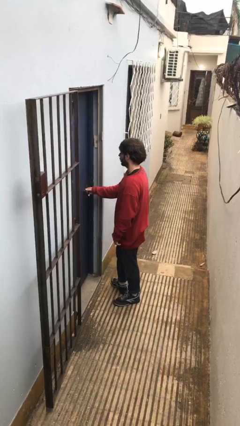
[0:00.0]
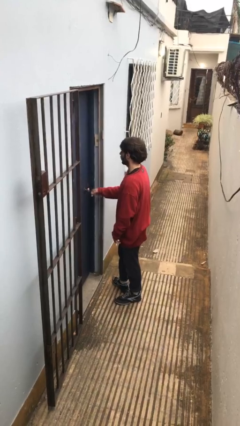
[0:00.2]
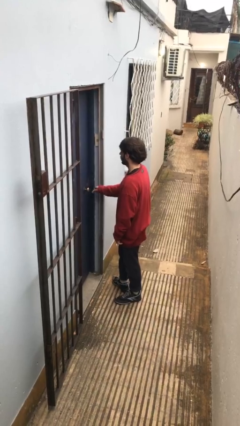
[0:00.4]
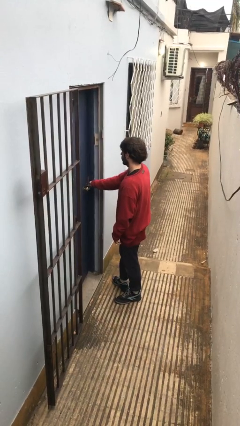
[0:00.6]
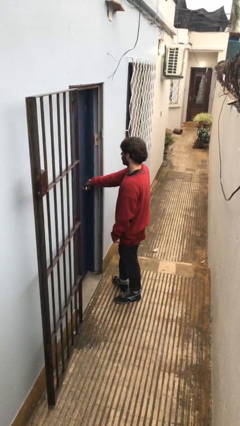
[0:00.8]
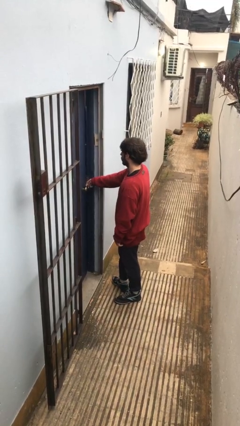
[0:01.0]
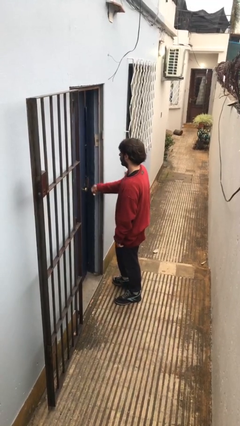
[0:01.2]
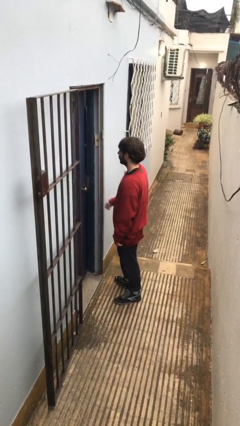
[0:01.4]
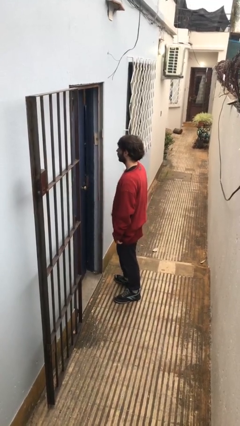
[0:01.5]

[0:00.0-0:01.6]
person locks door with keys

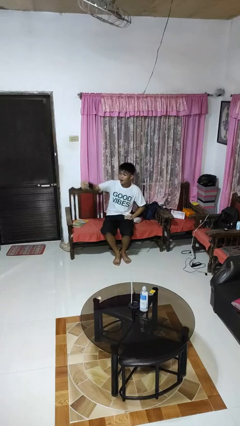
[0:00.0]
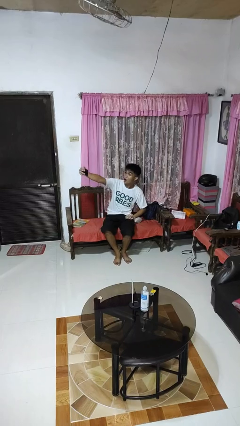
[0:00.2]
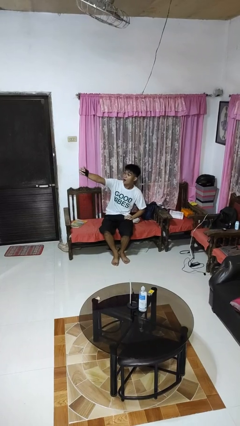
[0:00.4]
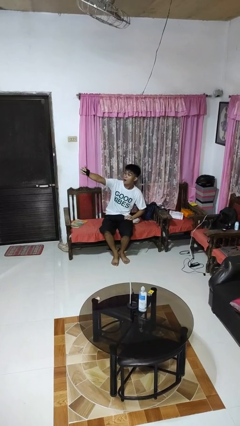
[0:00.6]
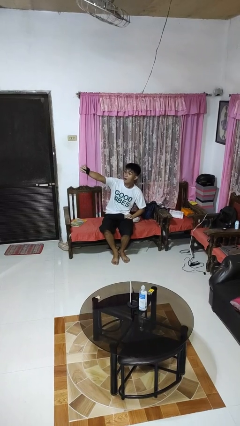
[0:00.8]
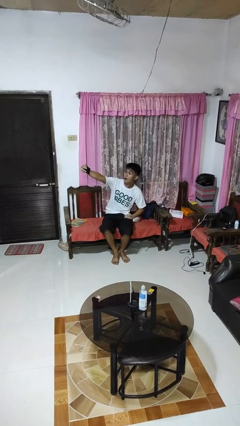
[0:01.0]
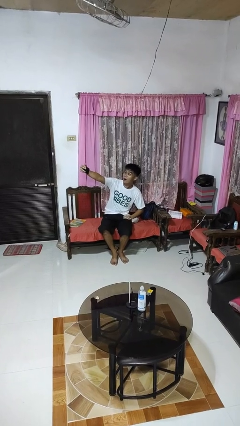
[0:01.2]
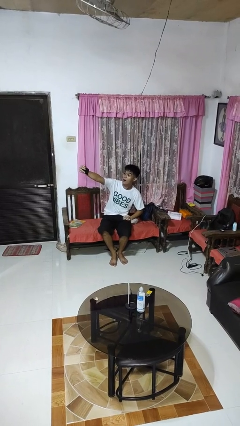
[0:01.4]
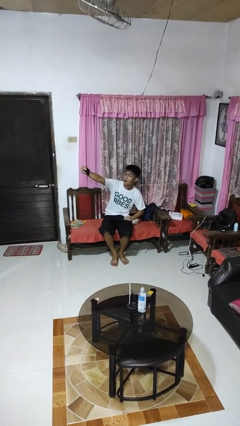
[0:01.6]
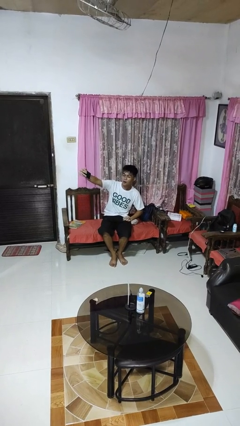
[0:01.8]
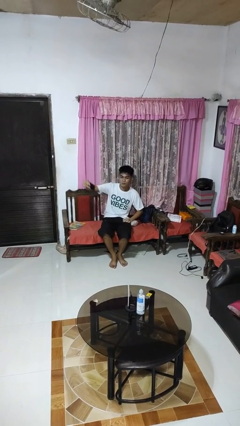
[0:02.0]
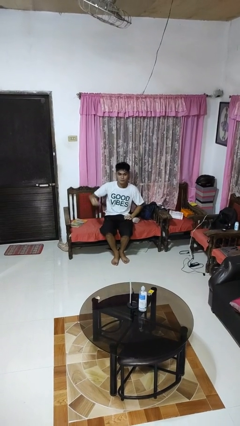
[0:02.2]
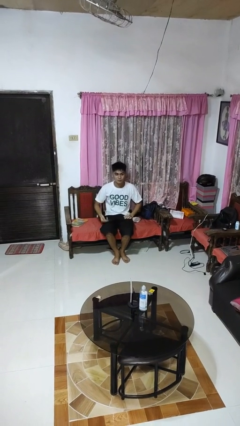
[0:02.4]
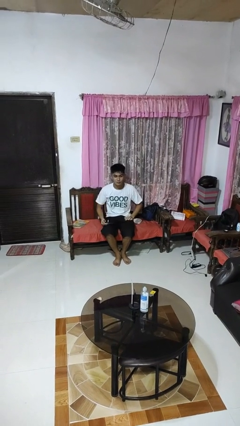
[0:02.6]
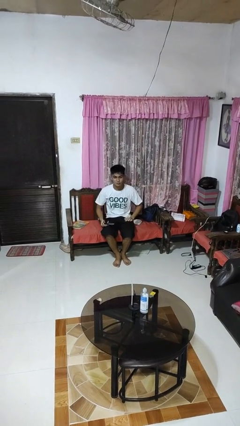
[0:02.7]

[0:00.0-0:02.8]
person takes selfie

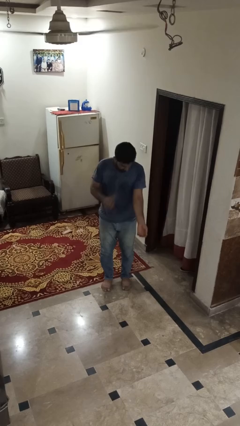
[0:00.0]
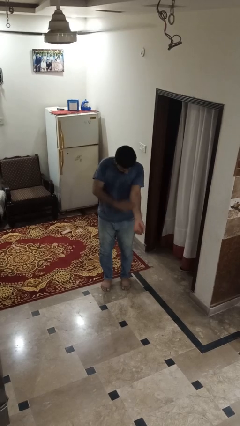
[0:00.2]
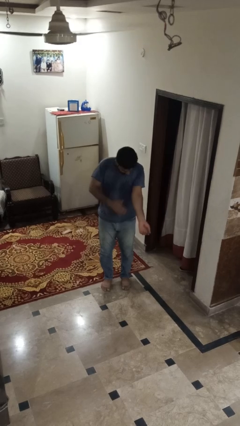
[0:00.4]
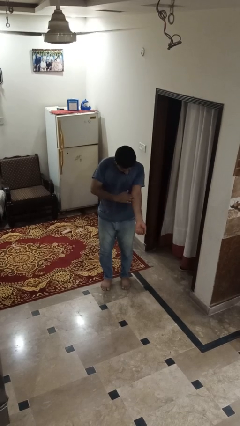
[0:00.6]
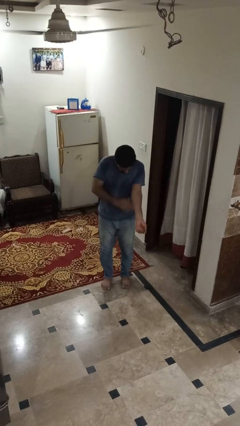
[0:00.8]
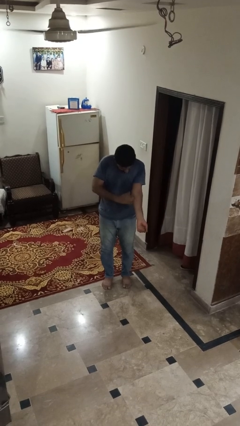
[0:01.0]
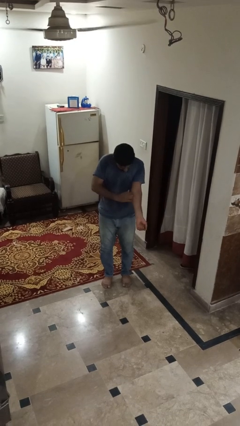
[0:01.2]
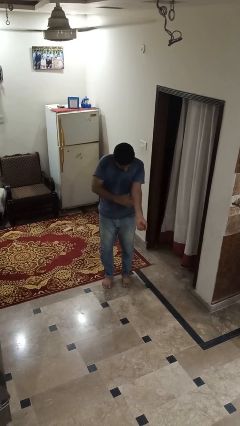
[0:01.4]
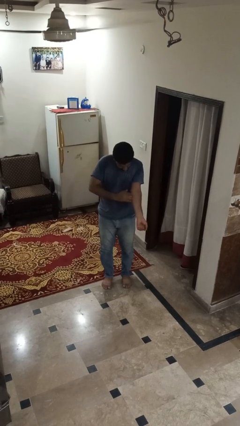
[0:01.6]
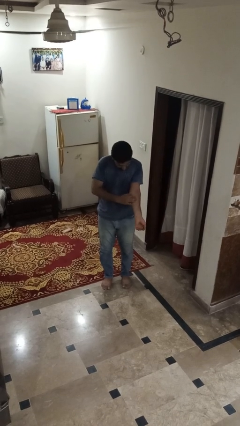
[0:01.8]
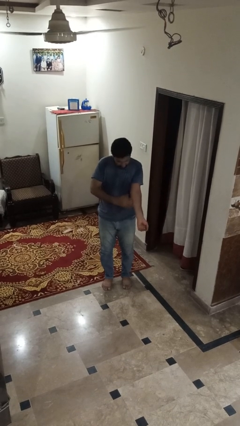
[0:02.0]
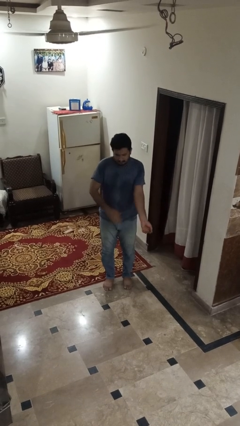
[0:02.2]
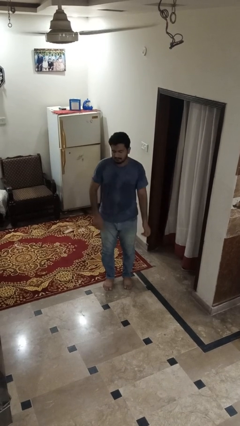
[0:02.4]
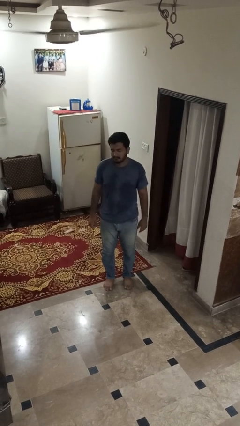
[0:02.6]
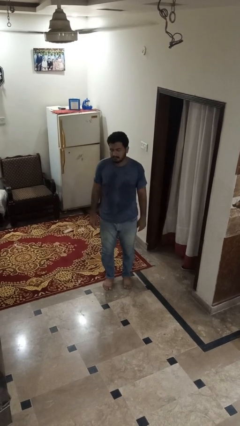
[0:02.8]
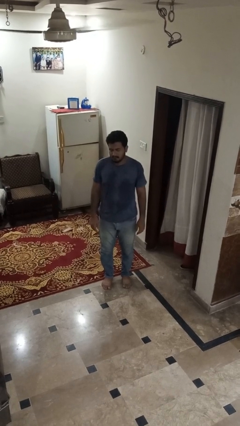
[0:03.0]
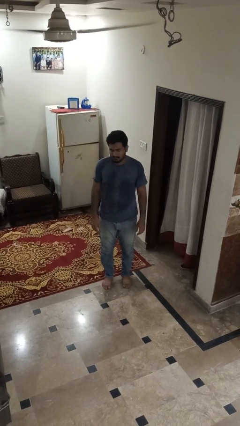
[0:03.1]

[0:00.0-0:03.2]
person swats bug

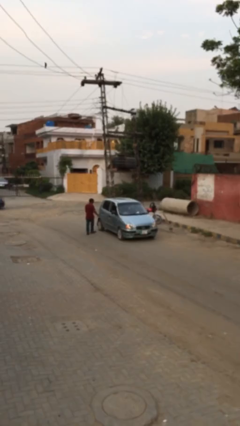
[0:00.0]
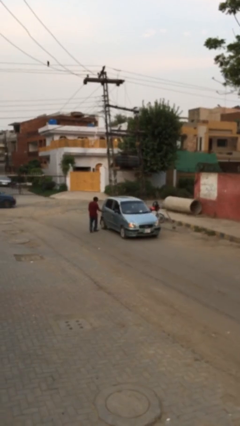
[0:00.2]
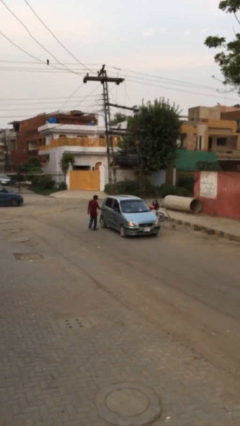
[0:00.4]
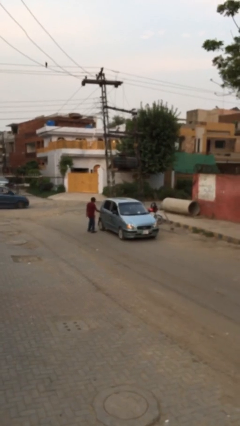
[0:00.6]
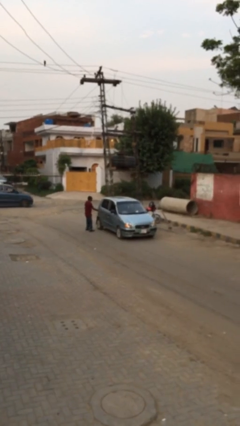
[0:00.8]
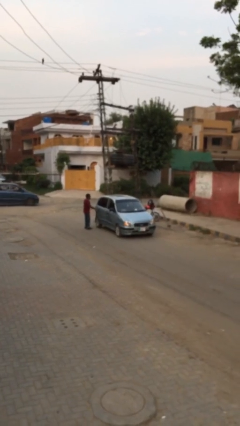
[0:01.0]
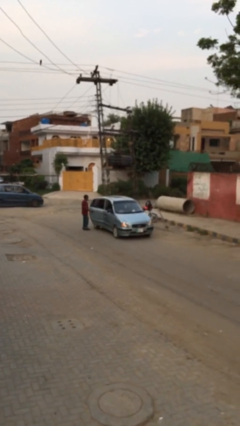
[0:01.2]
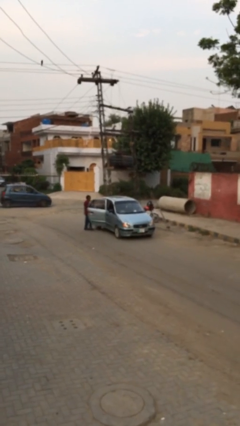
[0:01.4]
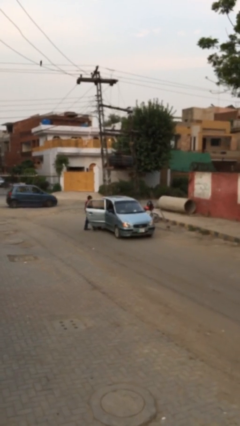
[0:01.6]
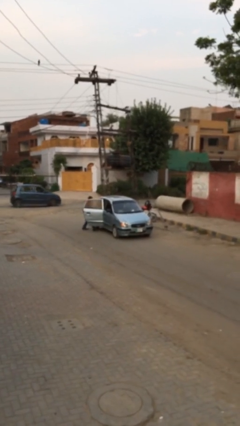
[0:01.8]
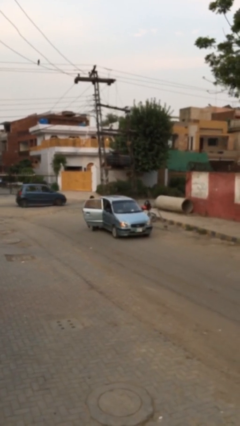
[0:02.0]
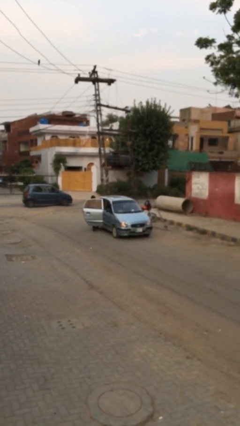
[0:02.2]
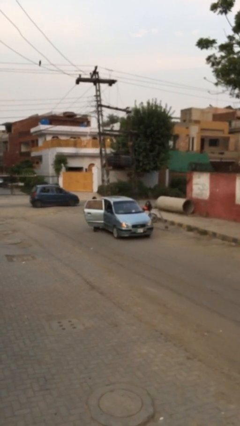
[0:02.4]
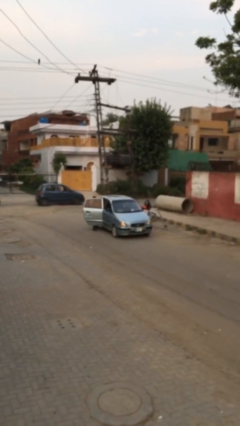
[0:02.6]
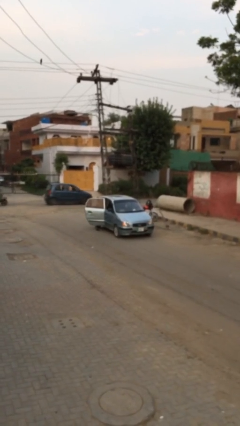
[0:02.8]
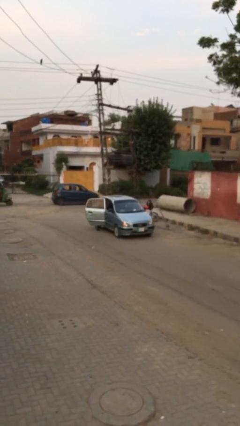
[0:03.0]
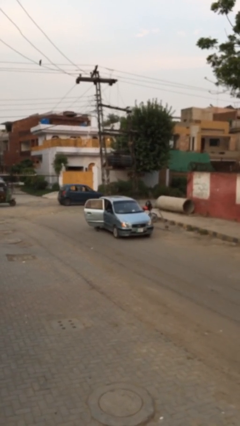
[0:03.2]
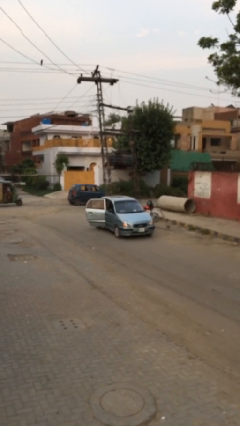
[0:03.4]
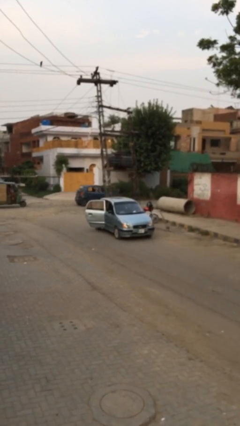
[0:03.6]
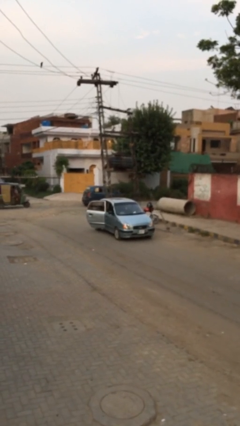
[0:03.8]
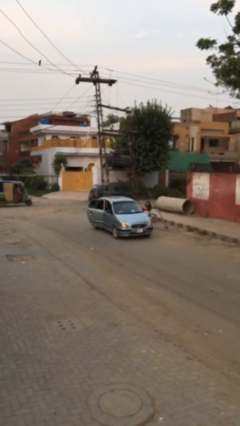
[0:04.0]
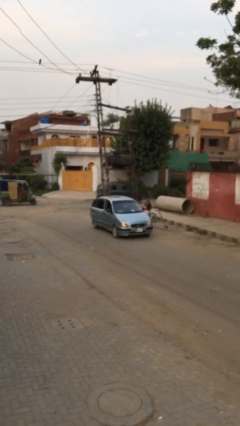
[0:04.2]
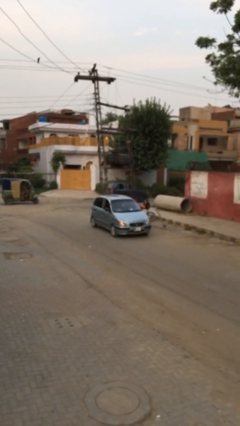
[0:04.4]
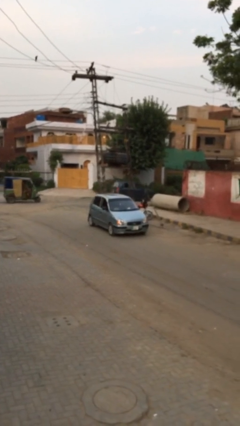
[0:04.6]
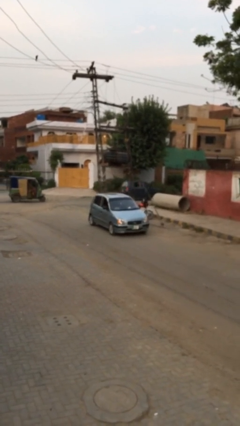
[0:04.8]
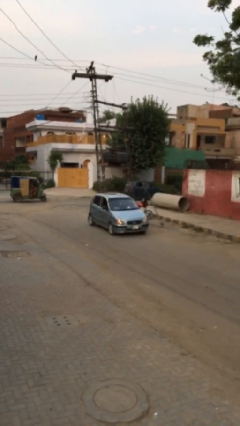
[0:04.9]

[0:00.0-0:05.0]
car picks up person

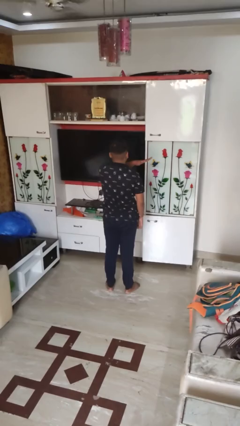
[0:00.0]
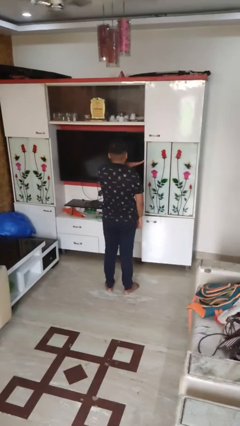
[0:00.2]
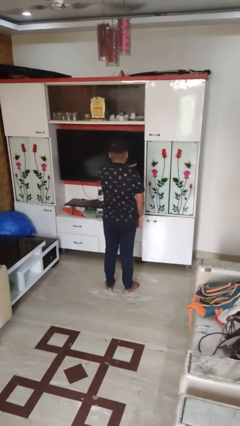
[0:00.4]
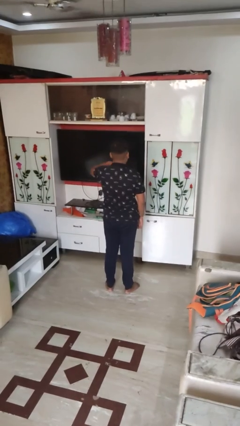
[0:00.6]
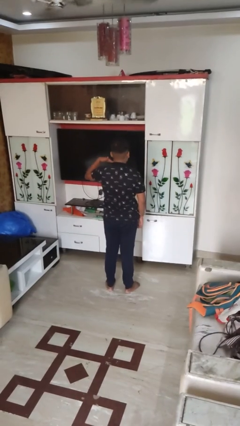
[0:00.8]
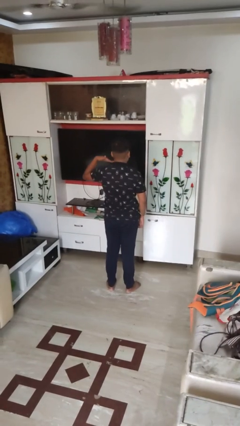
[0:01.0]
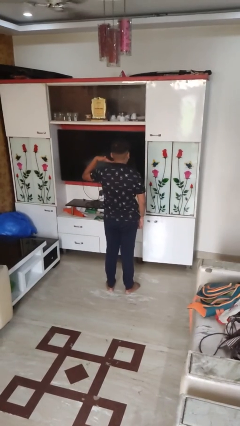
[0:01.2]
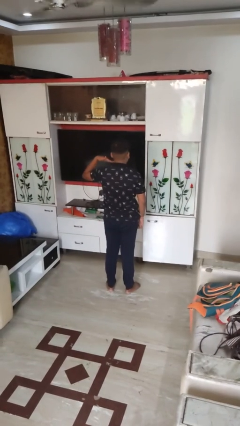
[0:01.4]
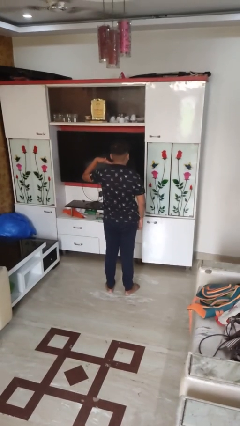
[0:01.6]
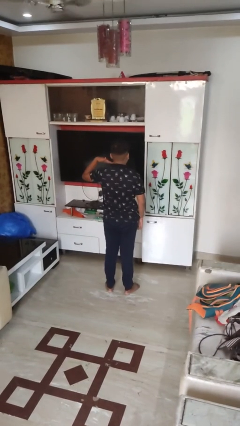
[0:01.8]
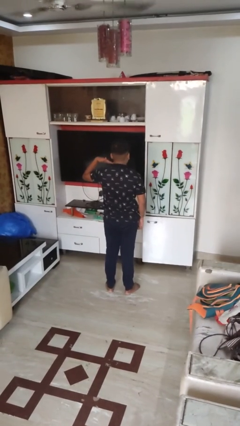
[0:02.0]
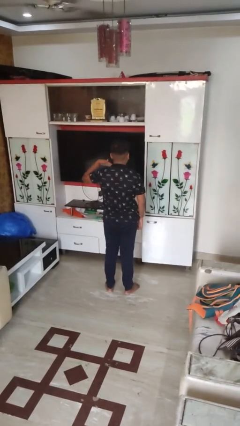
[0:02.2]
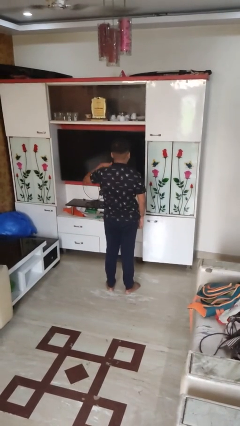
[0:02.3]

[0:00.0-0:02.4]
person gestures cut

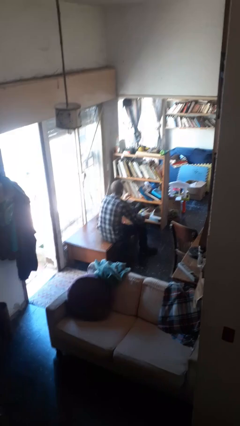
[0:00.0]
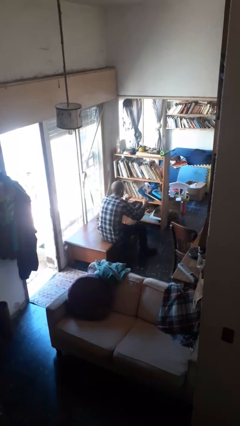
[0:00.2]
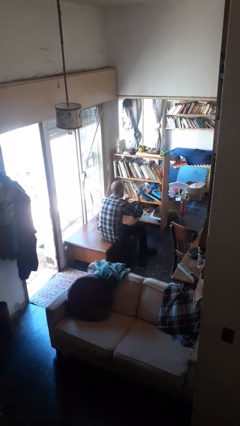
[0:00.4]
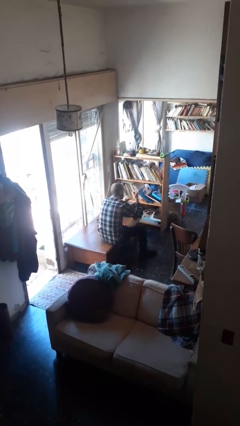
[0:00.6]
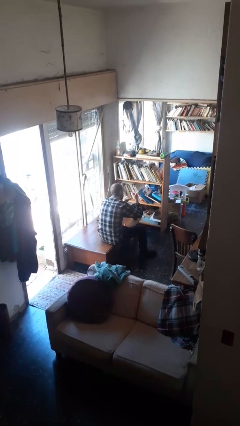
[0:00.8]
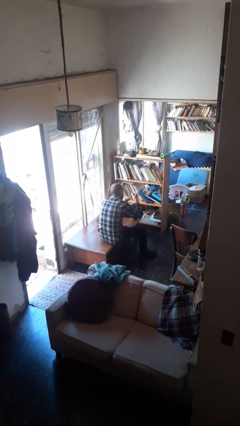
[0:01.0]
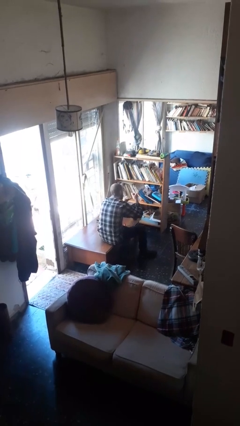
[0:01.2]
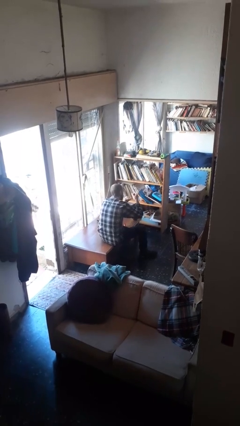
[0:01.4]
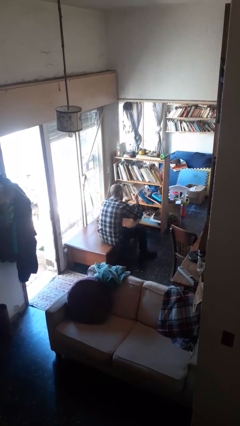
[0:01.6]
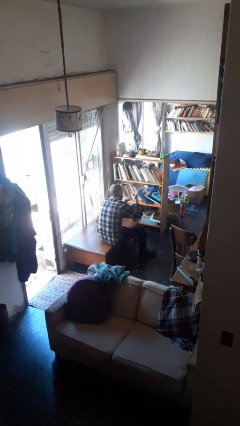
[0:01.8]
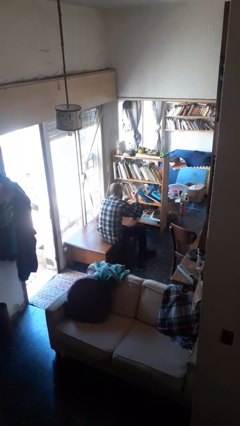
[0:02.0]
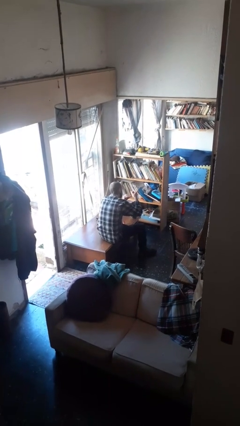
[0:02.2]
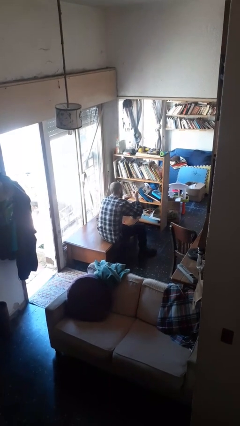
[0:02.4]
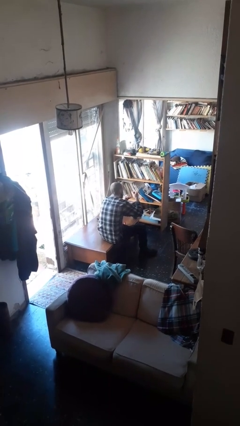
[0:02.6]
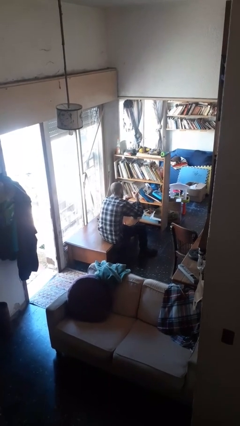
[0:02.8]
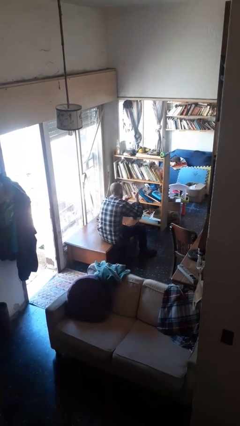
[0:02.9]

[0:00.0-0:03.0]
person paints fingernails
